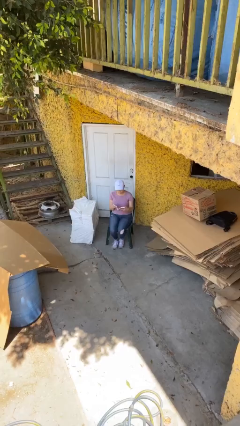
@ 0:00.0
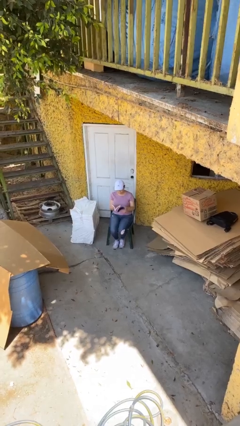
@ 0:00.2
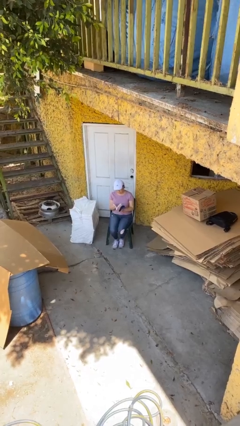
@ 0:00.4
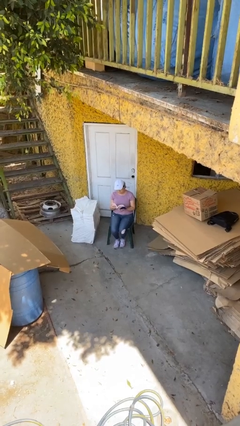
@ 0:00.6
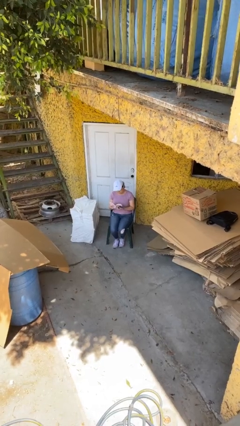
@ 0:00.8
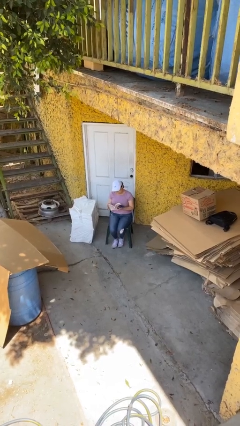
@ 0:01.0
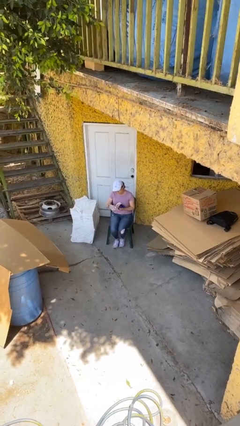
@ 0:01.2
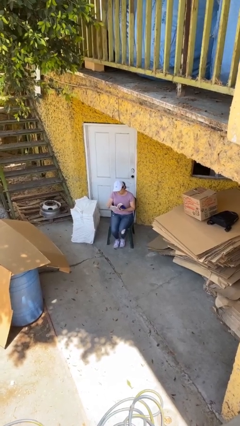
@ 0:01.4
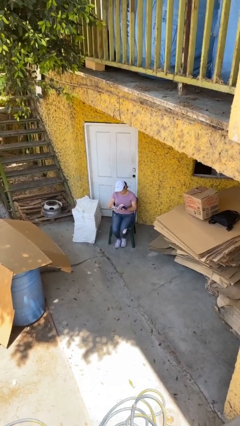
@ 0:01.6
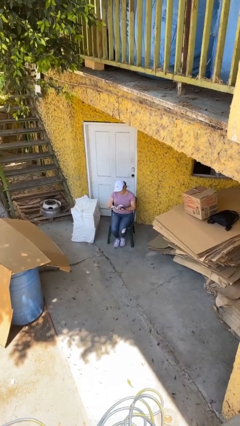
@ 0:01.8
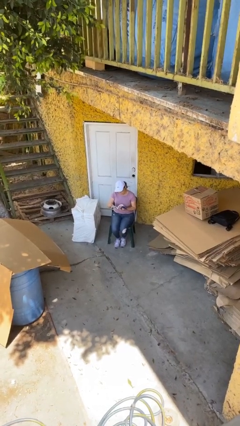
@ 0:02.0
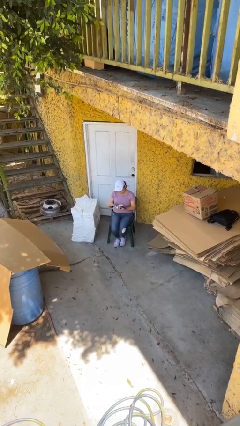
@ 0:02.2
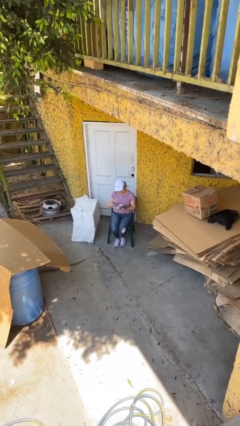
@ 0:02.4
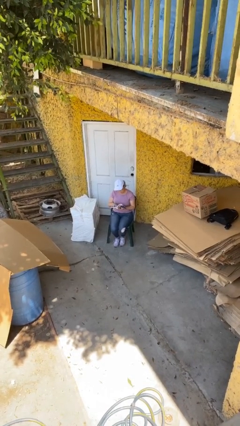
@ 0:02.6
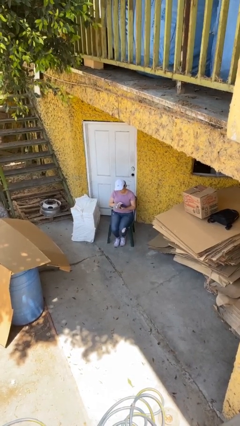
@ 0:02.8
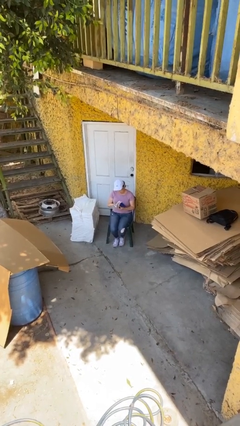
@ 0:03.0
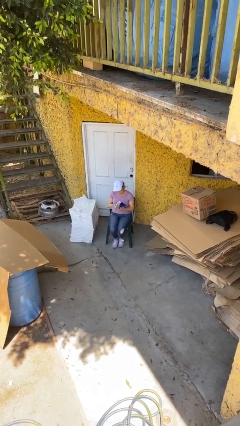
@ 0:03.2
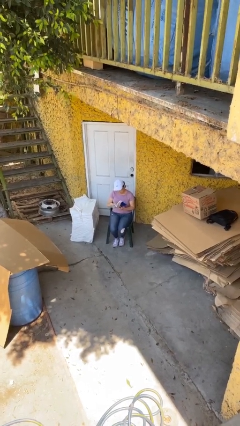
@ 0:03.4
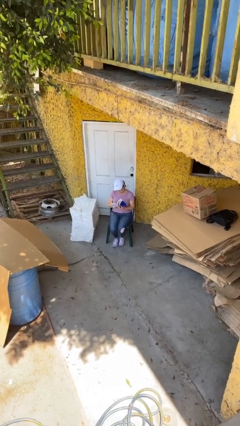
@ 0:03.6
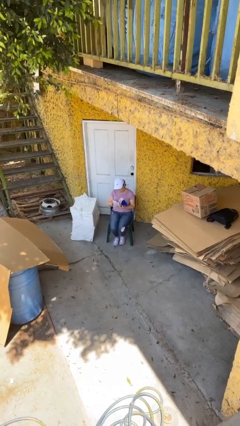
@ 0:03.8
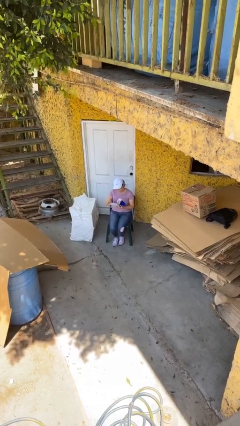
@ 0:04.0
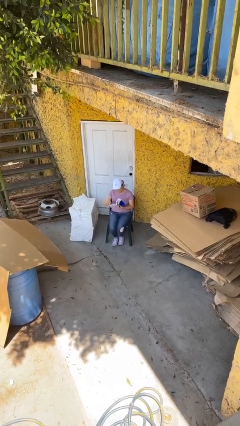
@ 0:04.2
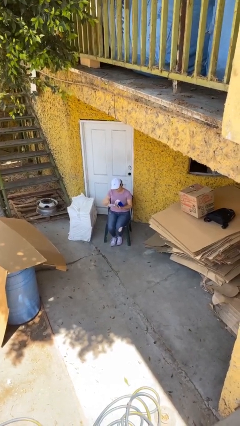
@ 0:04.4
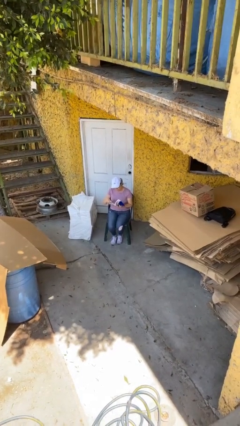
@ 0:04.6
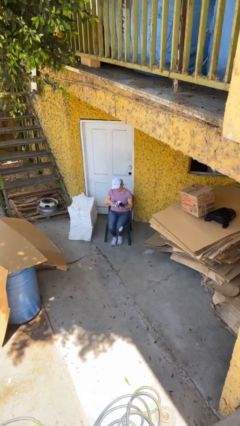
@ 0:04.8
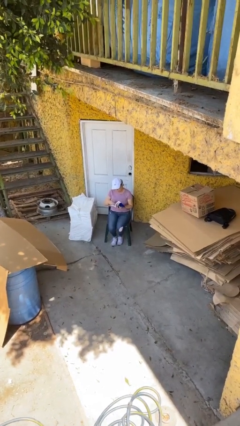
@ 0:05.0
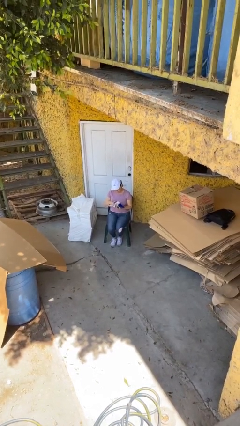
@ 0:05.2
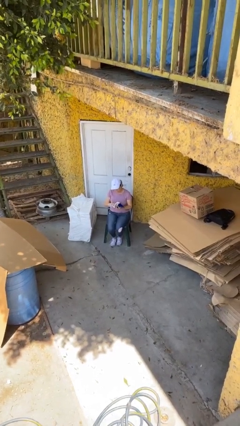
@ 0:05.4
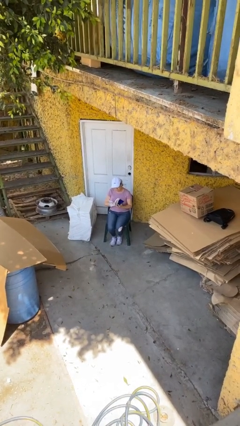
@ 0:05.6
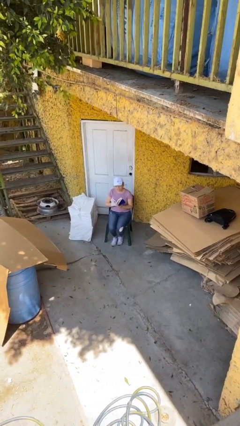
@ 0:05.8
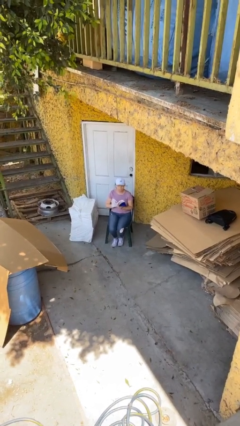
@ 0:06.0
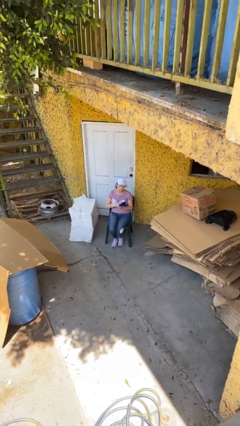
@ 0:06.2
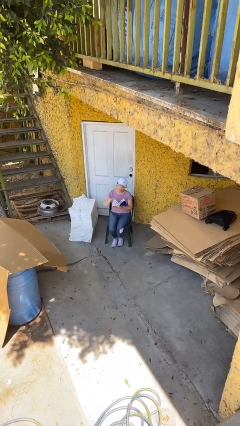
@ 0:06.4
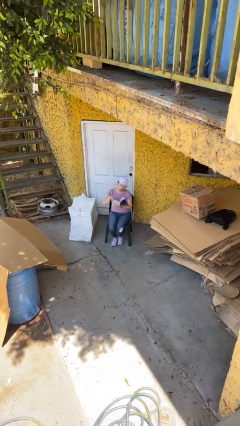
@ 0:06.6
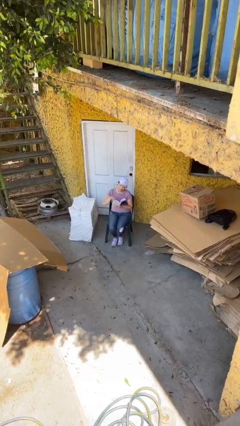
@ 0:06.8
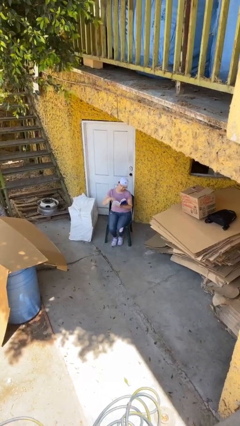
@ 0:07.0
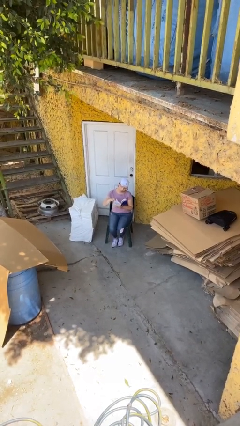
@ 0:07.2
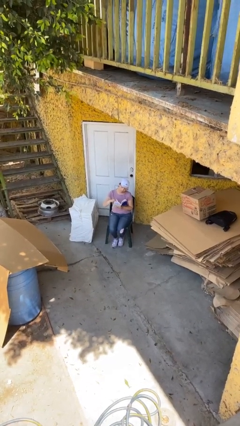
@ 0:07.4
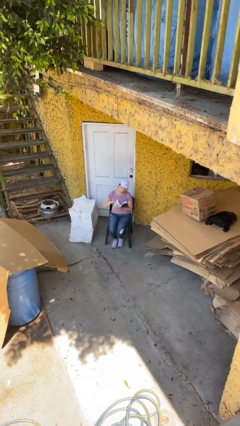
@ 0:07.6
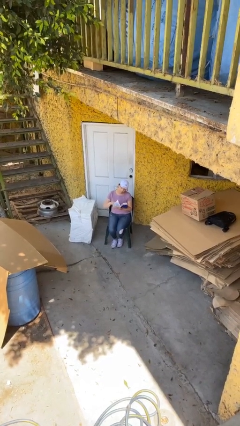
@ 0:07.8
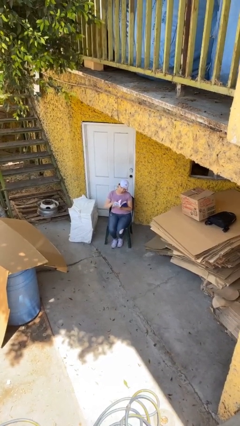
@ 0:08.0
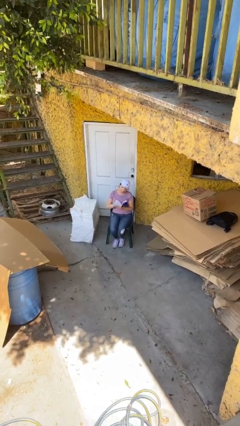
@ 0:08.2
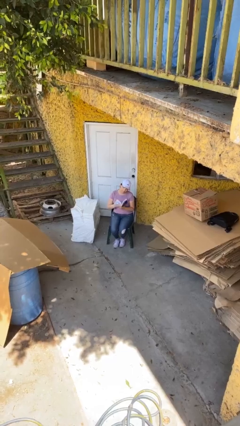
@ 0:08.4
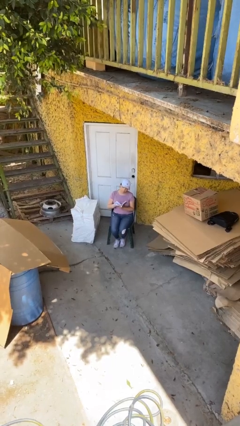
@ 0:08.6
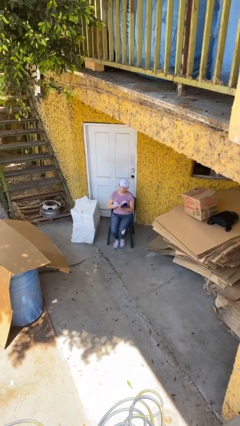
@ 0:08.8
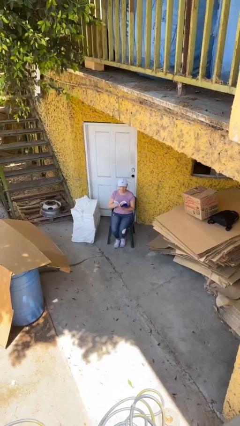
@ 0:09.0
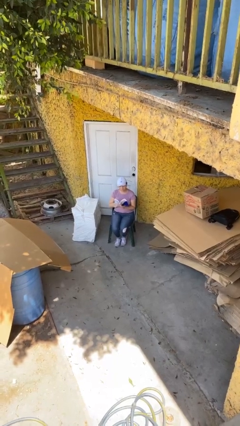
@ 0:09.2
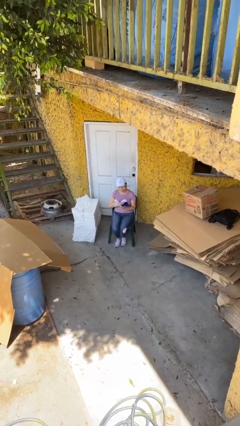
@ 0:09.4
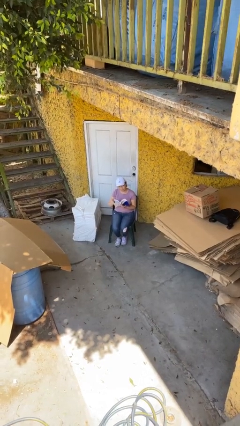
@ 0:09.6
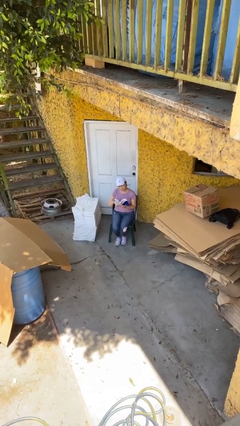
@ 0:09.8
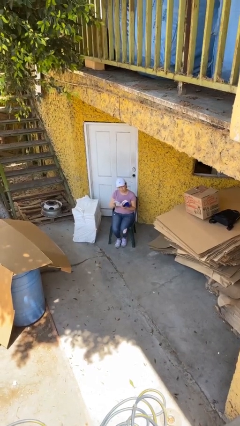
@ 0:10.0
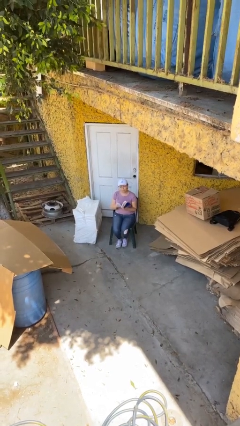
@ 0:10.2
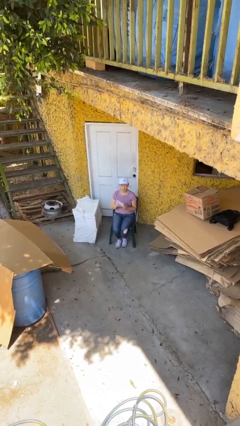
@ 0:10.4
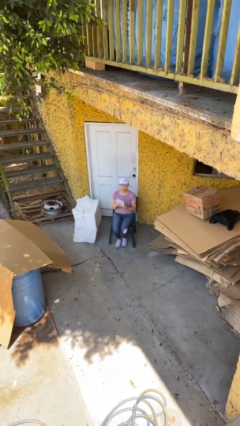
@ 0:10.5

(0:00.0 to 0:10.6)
person reads document

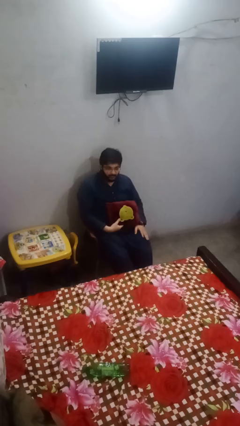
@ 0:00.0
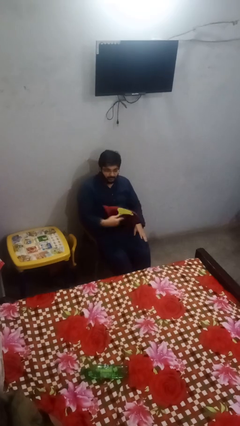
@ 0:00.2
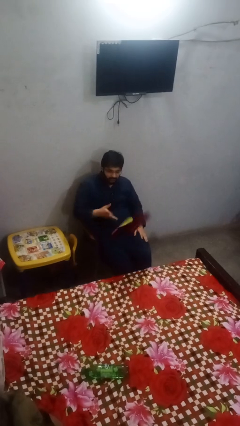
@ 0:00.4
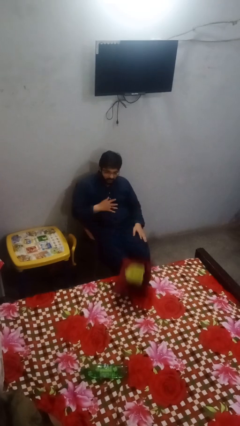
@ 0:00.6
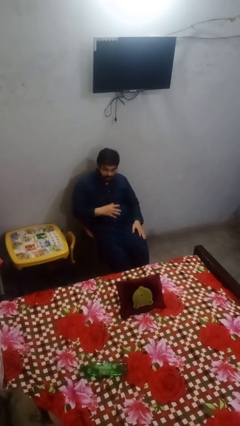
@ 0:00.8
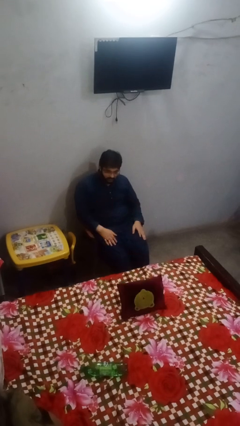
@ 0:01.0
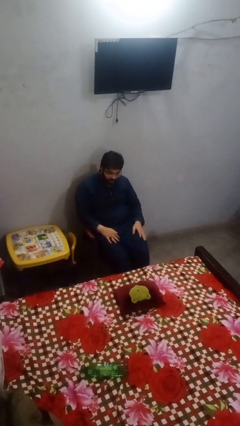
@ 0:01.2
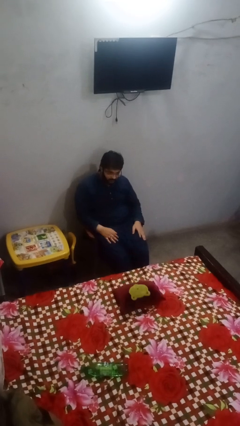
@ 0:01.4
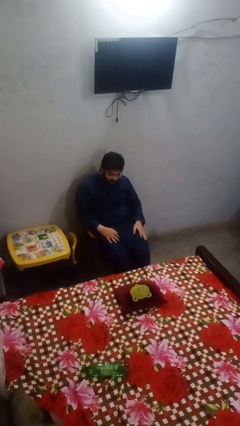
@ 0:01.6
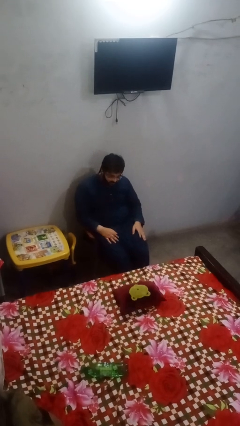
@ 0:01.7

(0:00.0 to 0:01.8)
person throws object on bed

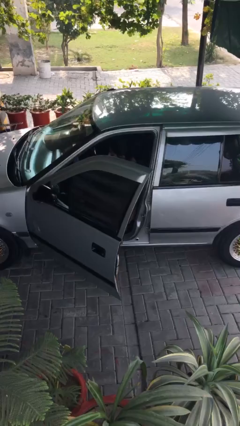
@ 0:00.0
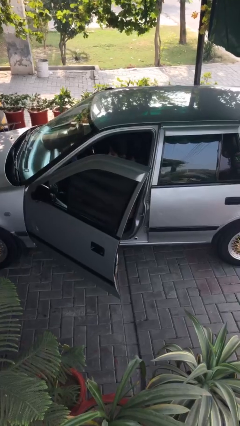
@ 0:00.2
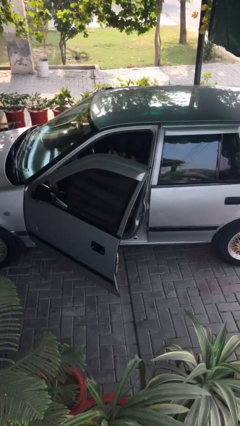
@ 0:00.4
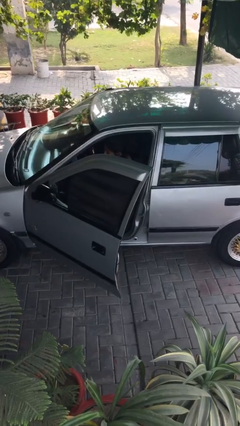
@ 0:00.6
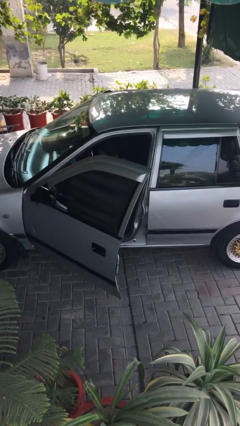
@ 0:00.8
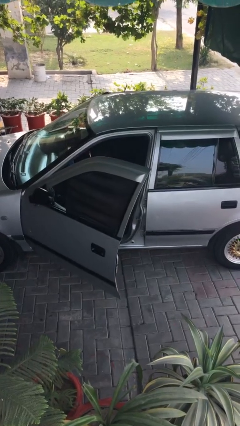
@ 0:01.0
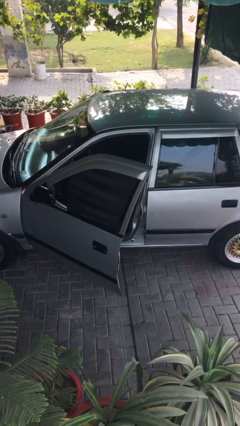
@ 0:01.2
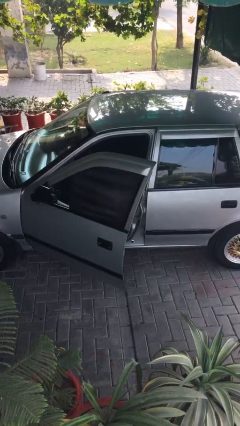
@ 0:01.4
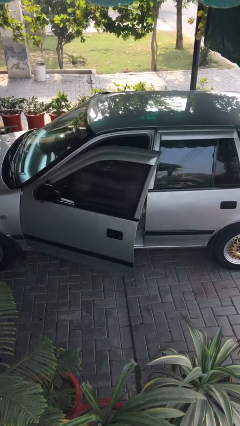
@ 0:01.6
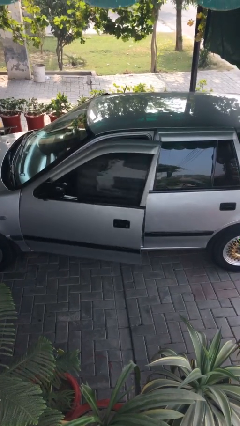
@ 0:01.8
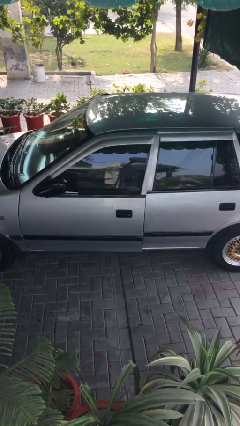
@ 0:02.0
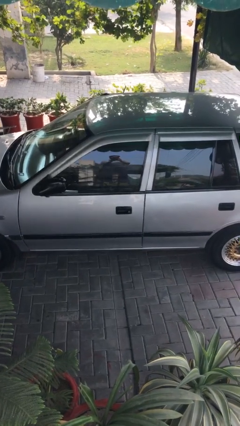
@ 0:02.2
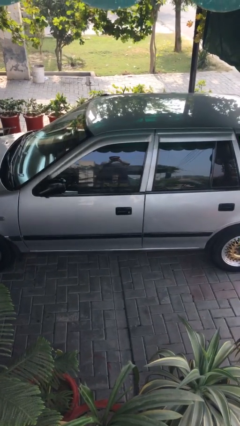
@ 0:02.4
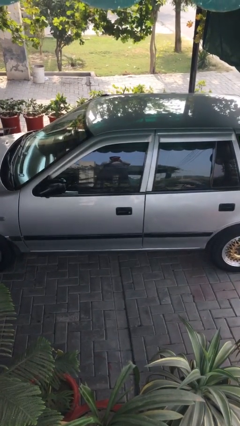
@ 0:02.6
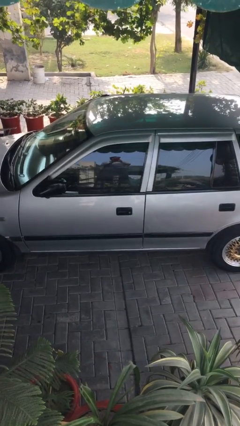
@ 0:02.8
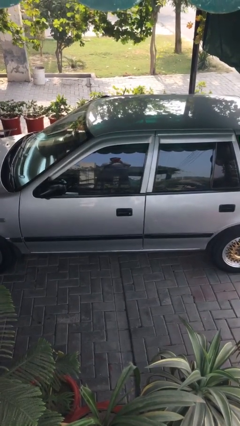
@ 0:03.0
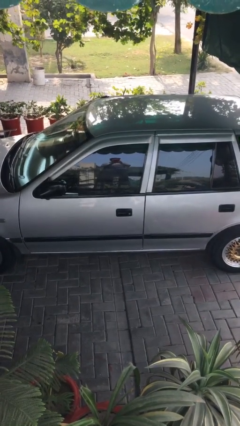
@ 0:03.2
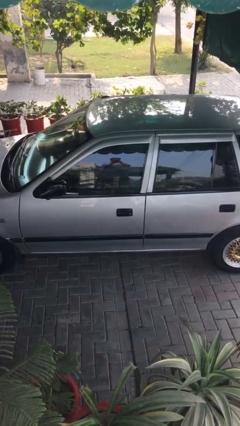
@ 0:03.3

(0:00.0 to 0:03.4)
person closes car door

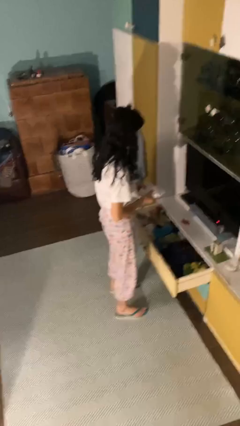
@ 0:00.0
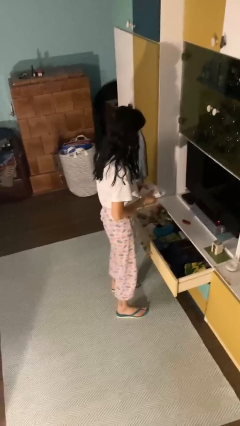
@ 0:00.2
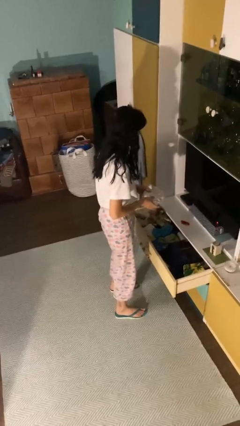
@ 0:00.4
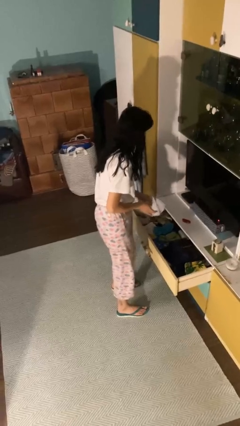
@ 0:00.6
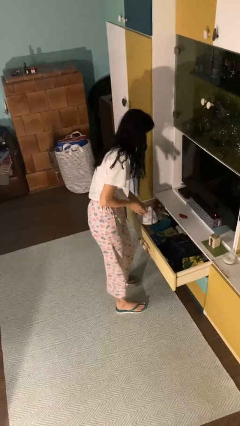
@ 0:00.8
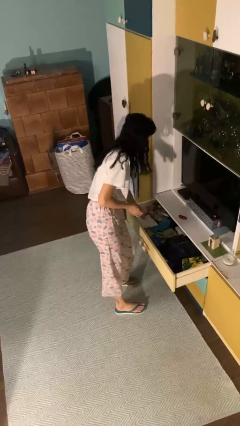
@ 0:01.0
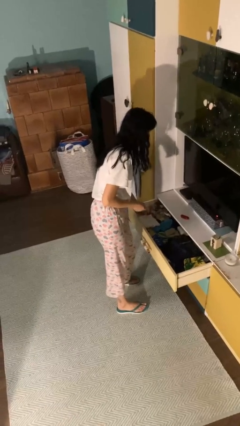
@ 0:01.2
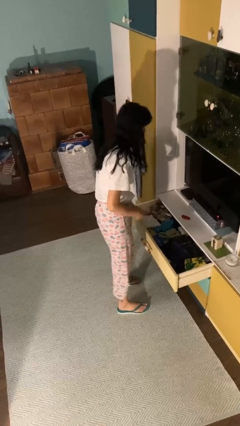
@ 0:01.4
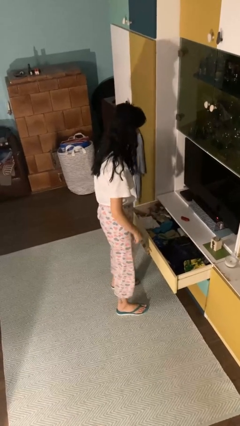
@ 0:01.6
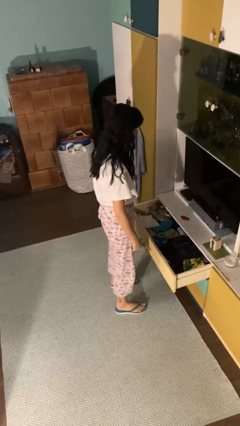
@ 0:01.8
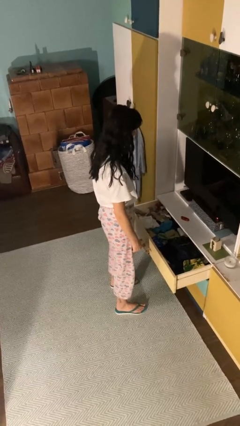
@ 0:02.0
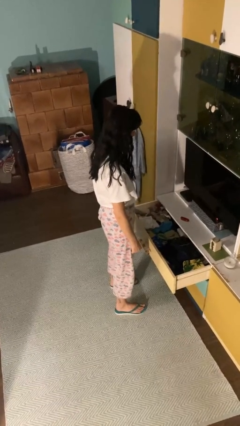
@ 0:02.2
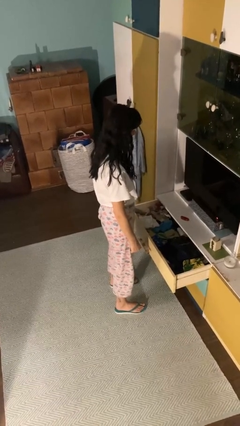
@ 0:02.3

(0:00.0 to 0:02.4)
person puts clothes into dresser
